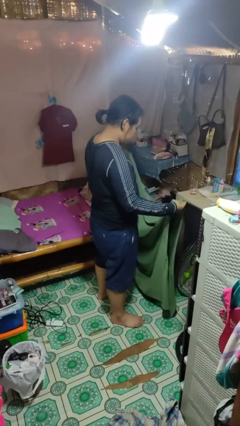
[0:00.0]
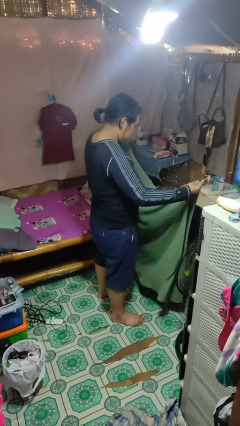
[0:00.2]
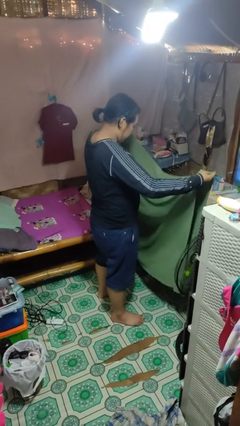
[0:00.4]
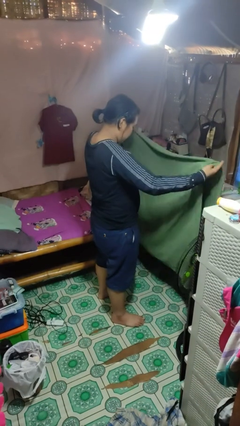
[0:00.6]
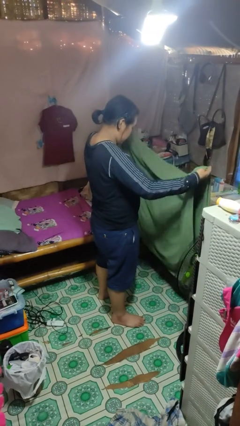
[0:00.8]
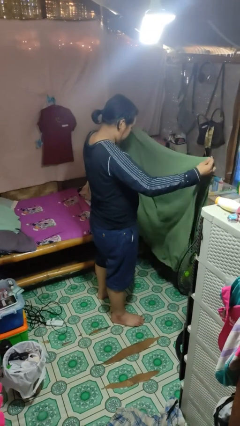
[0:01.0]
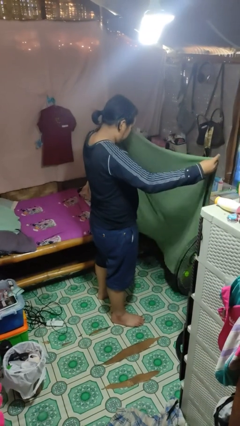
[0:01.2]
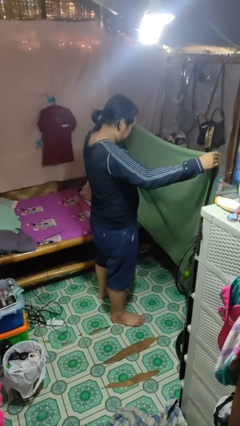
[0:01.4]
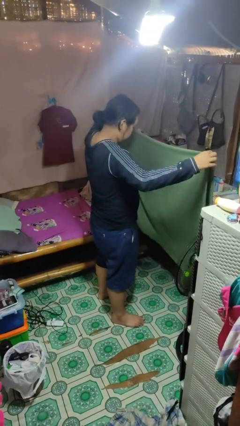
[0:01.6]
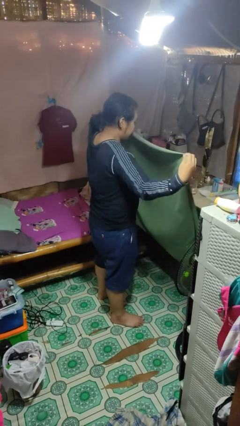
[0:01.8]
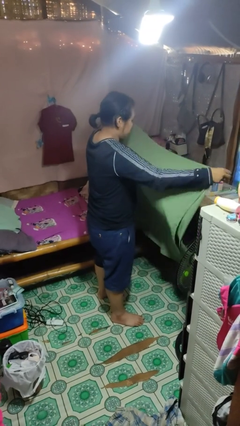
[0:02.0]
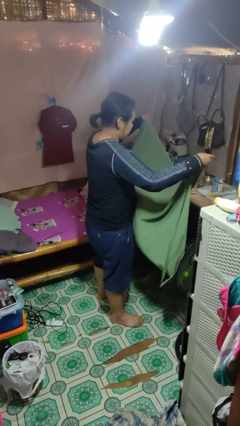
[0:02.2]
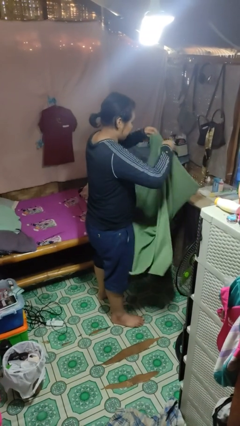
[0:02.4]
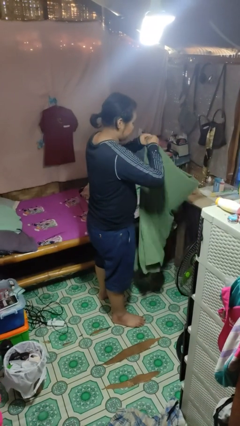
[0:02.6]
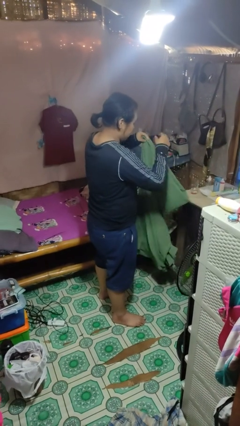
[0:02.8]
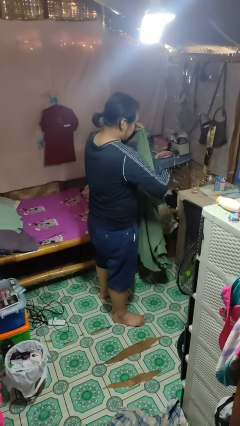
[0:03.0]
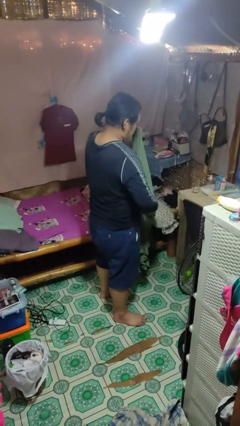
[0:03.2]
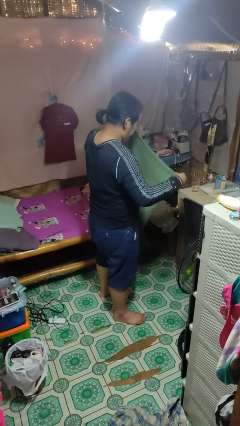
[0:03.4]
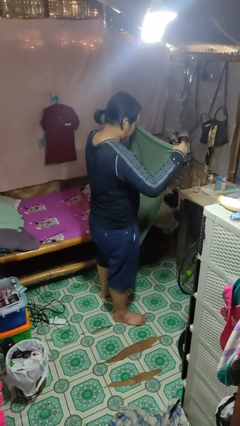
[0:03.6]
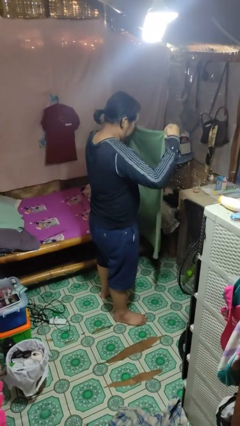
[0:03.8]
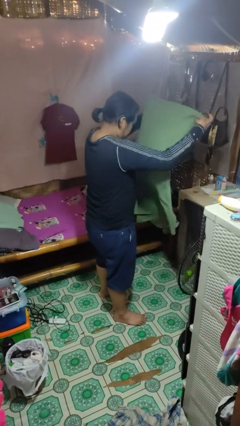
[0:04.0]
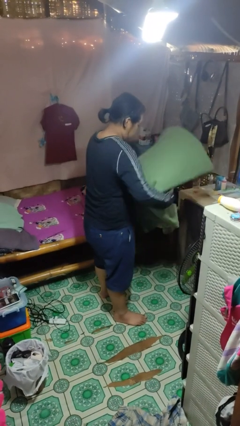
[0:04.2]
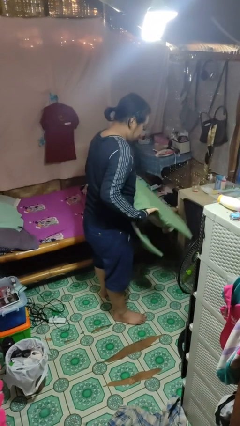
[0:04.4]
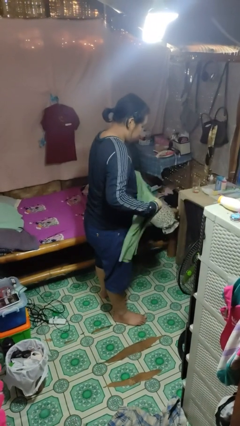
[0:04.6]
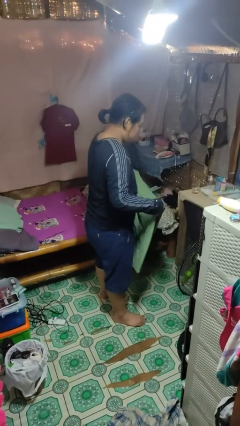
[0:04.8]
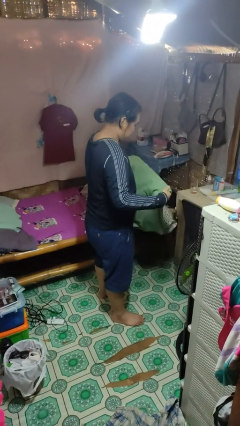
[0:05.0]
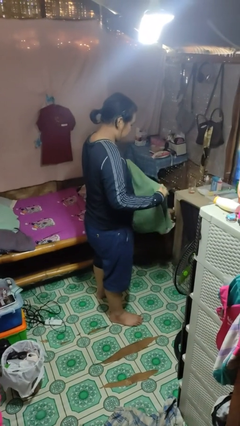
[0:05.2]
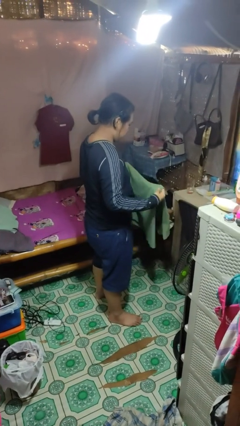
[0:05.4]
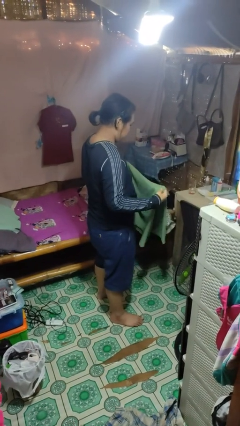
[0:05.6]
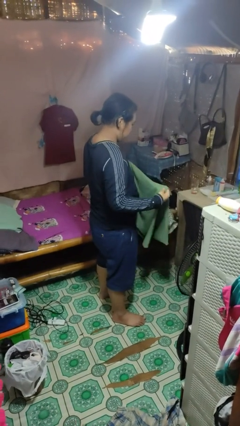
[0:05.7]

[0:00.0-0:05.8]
person folds blanket

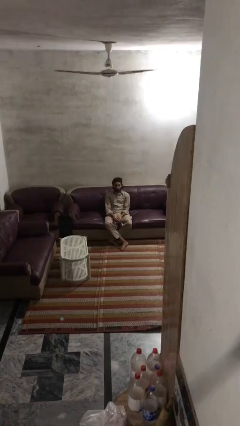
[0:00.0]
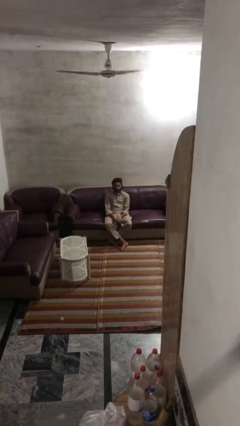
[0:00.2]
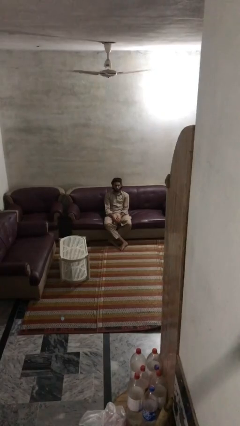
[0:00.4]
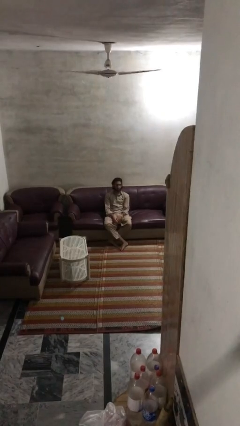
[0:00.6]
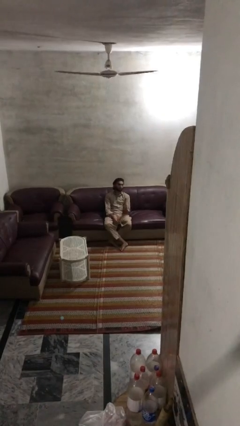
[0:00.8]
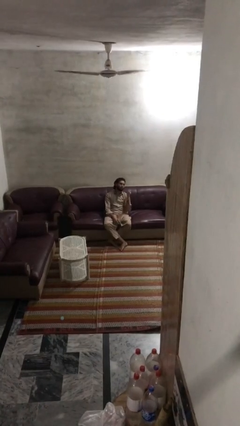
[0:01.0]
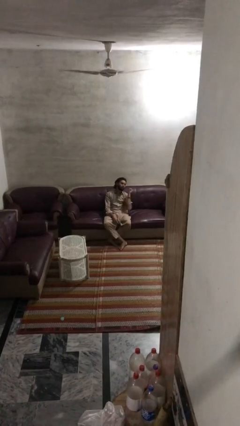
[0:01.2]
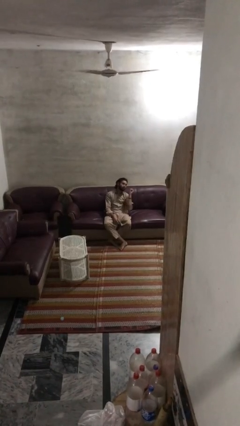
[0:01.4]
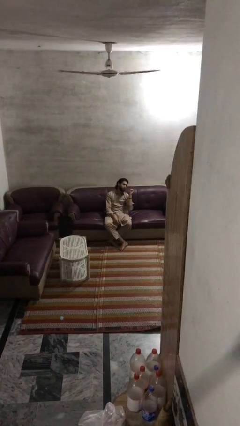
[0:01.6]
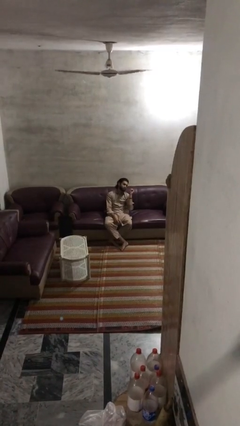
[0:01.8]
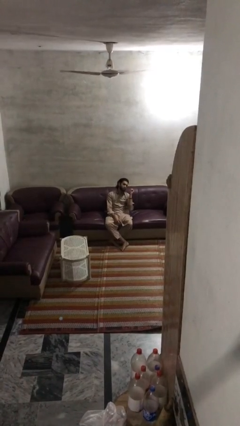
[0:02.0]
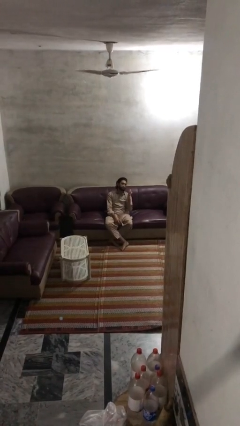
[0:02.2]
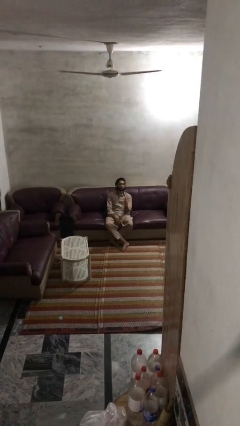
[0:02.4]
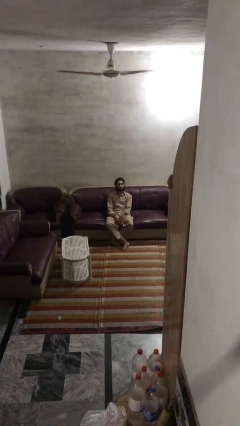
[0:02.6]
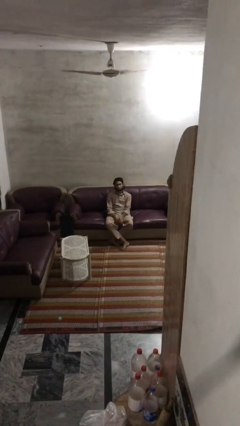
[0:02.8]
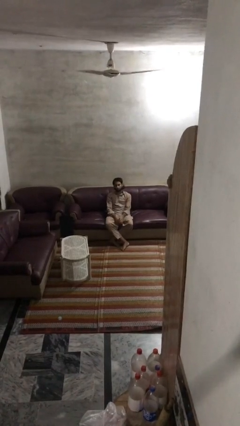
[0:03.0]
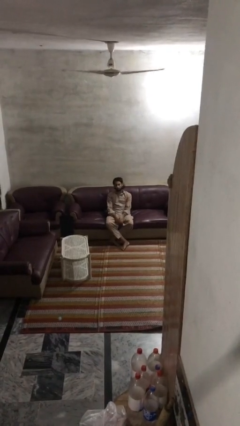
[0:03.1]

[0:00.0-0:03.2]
person gestures behind me

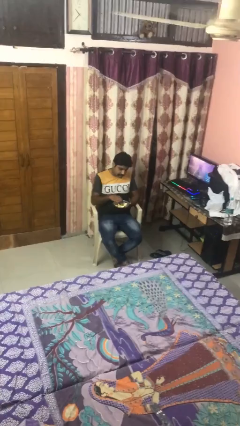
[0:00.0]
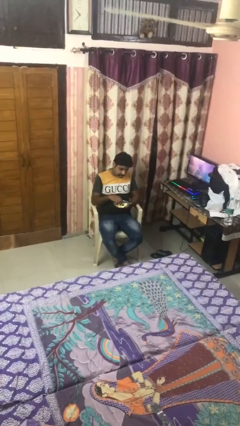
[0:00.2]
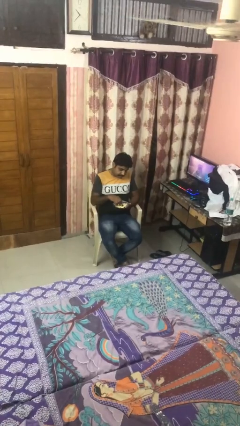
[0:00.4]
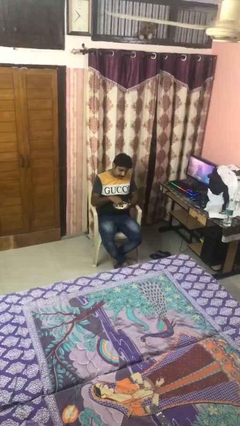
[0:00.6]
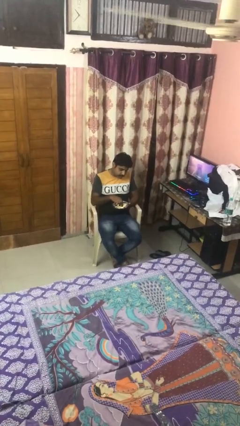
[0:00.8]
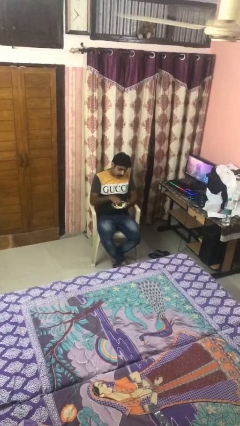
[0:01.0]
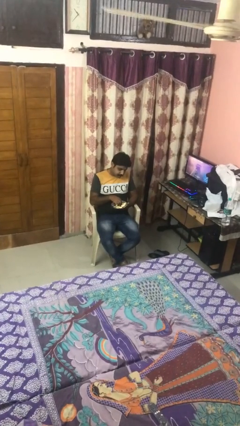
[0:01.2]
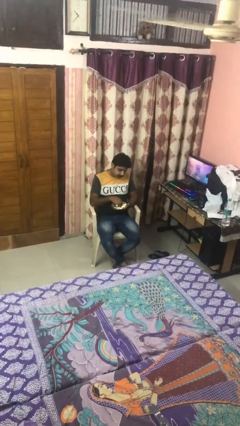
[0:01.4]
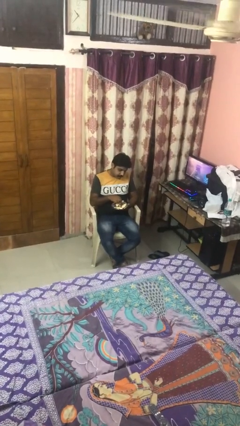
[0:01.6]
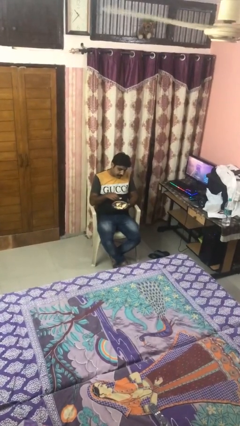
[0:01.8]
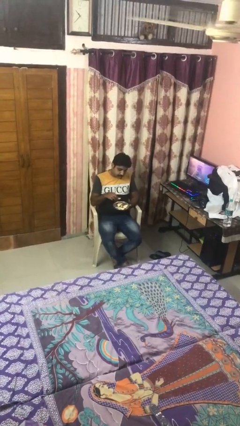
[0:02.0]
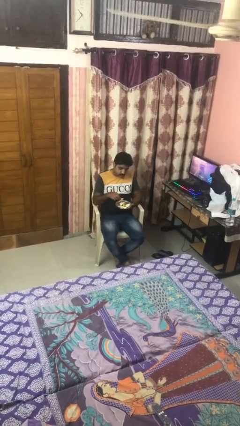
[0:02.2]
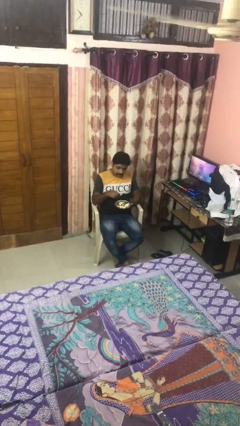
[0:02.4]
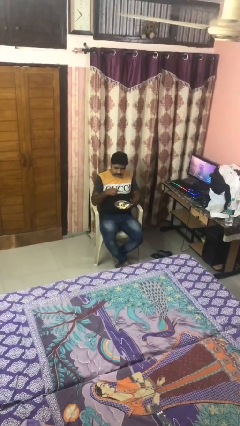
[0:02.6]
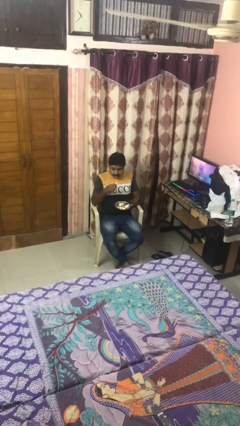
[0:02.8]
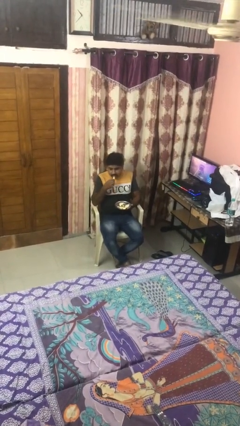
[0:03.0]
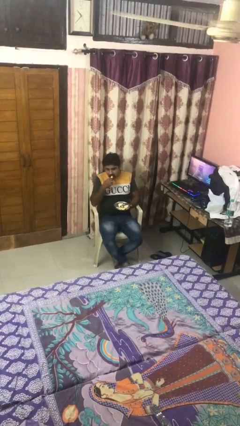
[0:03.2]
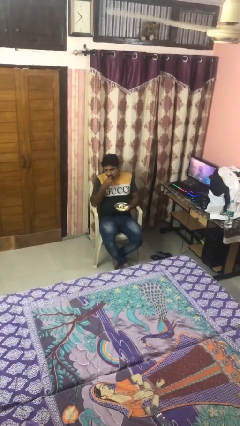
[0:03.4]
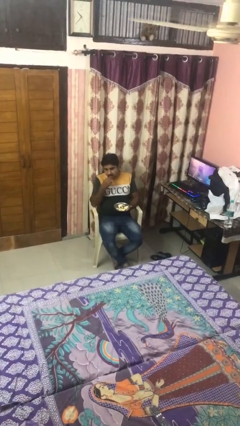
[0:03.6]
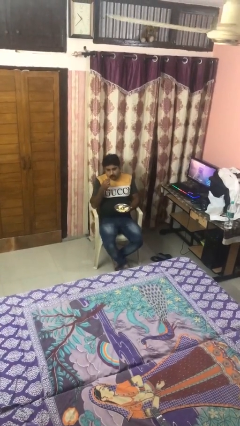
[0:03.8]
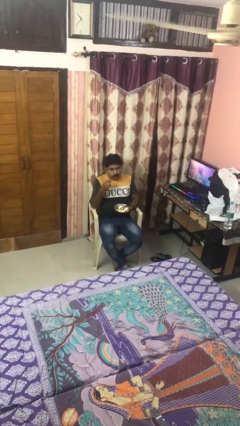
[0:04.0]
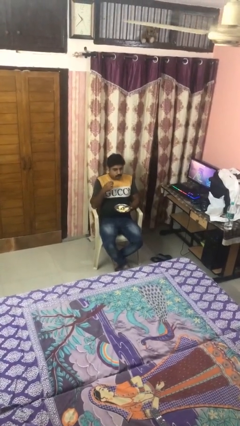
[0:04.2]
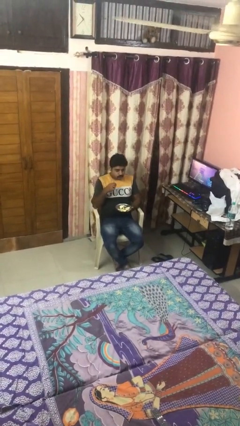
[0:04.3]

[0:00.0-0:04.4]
person eats with hands

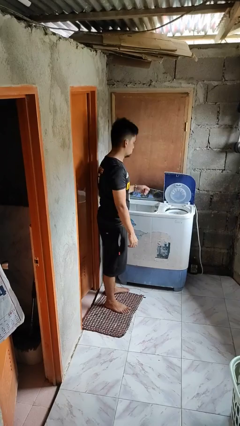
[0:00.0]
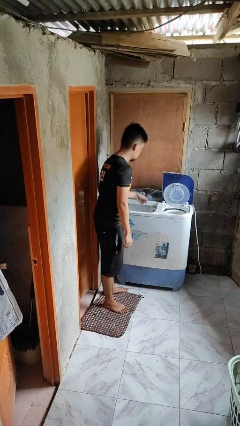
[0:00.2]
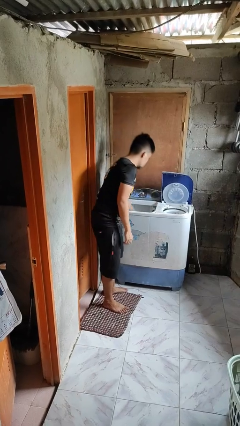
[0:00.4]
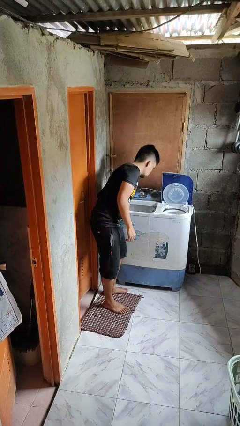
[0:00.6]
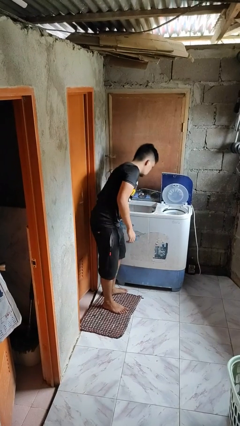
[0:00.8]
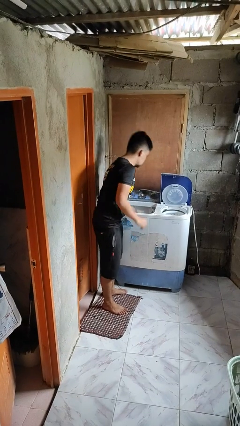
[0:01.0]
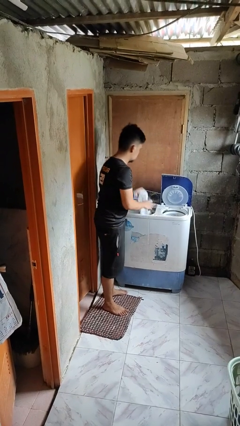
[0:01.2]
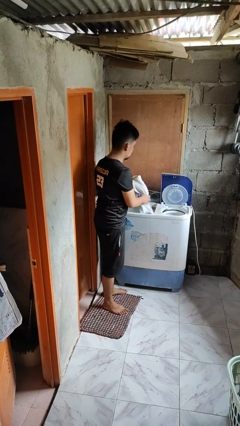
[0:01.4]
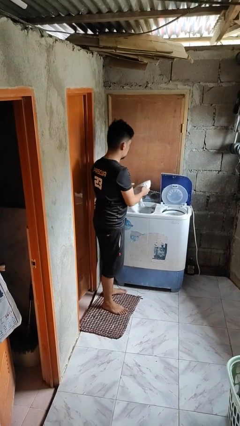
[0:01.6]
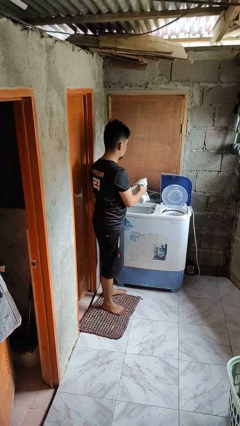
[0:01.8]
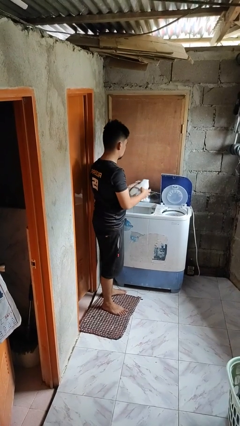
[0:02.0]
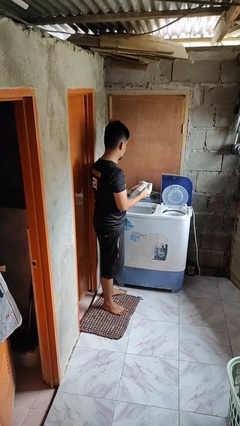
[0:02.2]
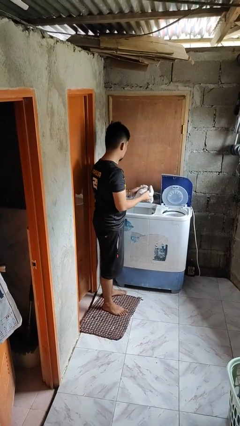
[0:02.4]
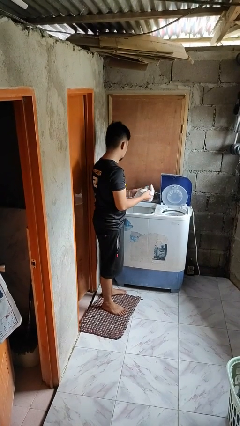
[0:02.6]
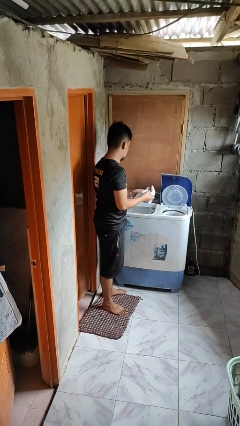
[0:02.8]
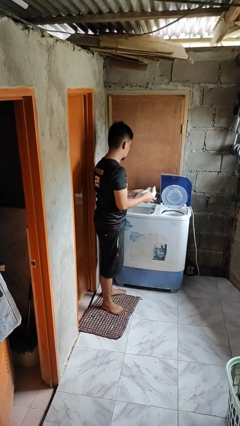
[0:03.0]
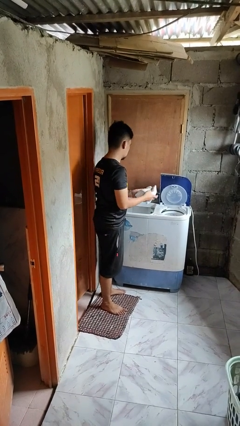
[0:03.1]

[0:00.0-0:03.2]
person unloads clotheswasher

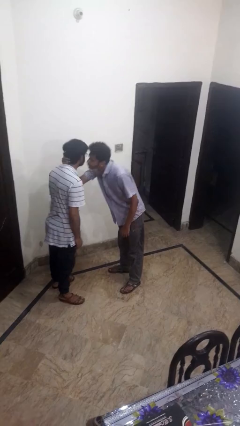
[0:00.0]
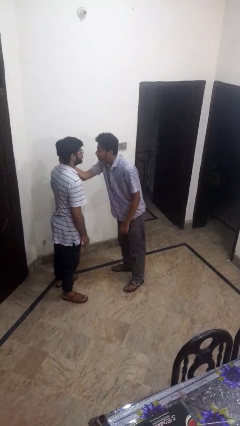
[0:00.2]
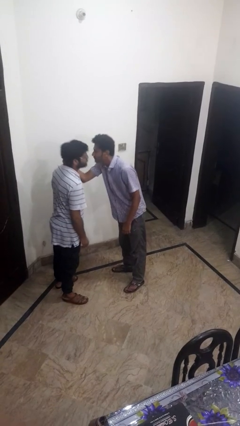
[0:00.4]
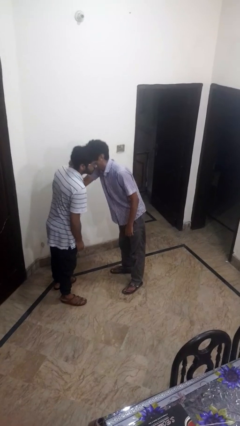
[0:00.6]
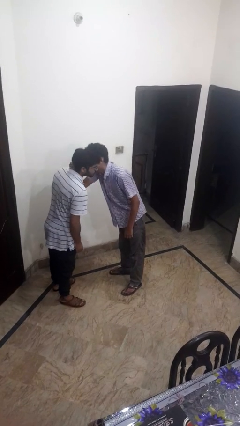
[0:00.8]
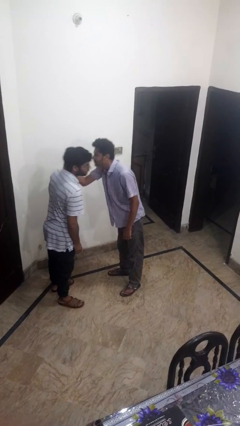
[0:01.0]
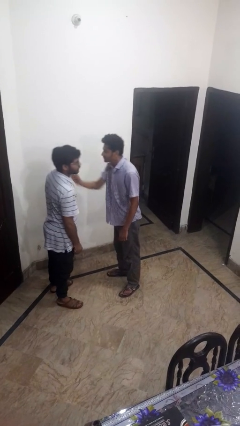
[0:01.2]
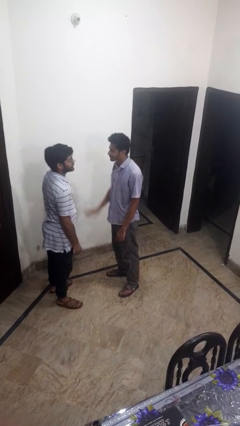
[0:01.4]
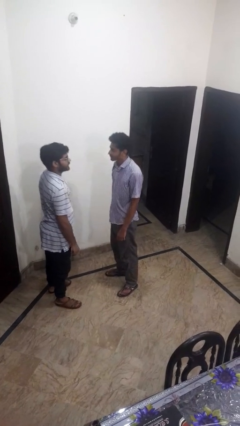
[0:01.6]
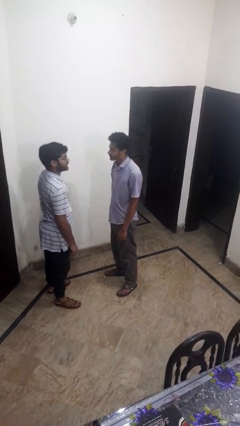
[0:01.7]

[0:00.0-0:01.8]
person grabs person by forearm
